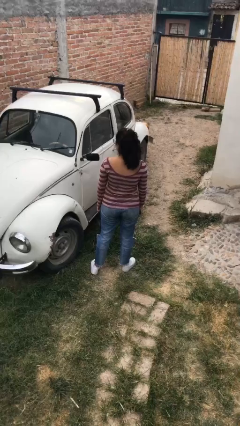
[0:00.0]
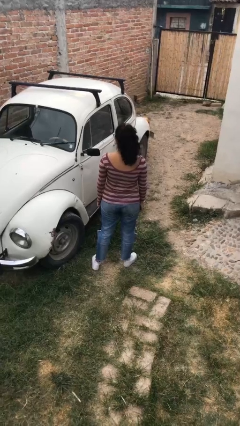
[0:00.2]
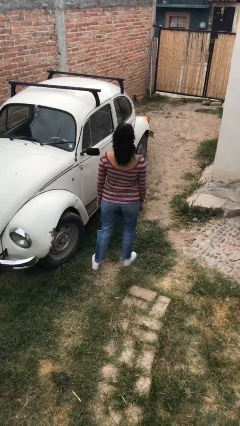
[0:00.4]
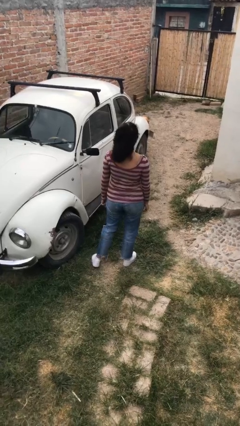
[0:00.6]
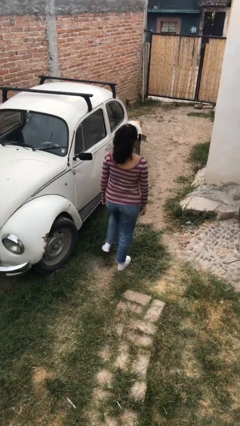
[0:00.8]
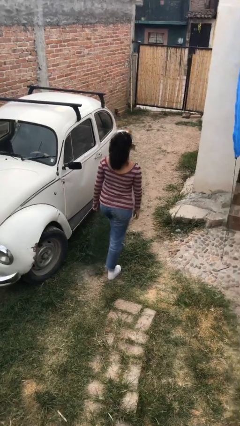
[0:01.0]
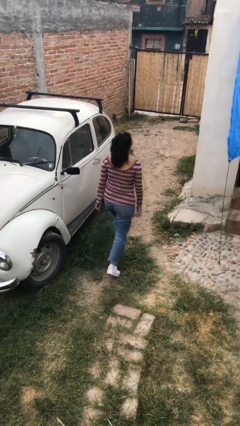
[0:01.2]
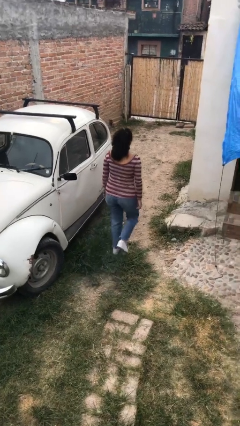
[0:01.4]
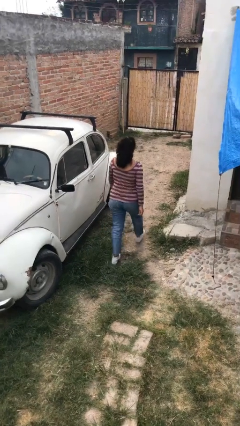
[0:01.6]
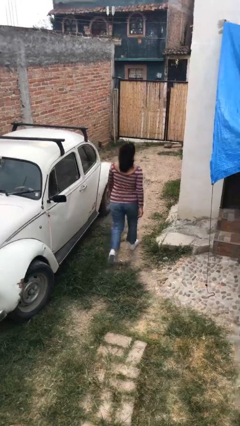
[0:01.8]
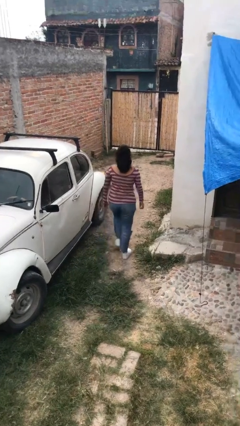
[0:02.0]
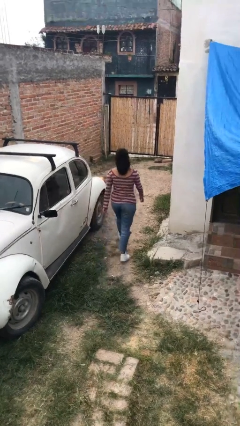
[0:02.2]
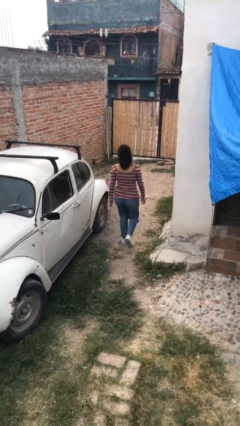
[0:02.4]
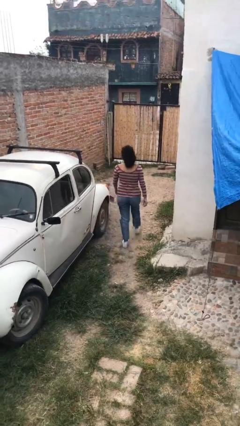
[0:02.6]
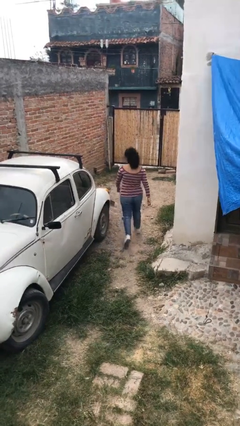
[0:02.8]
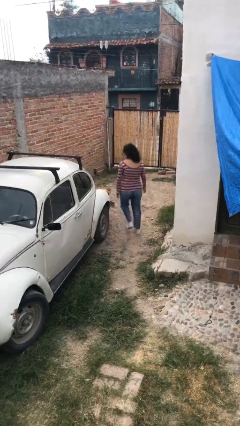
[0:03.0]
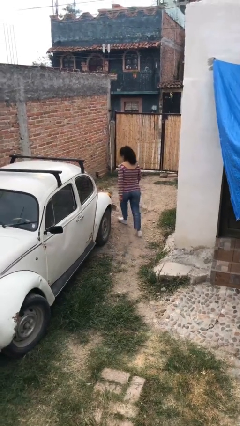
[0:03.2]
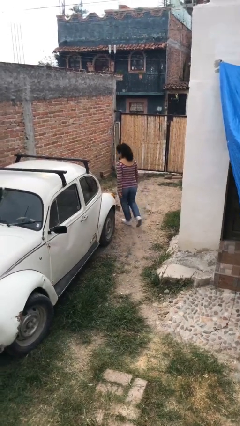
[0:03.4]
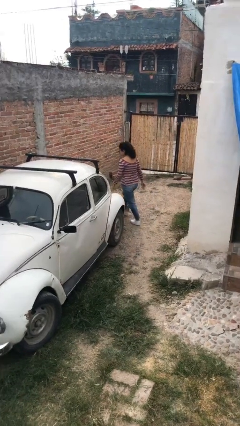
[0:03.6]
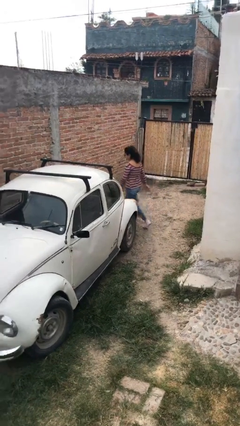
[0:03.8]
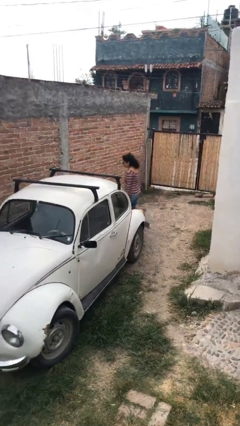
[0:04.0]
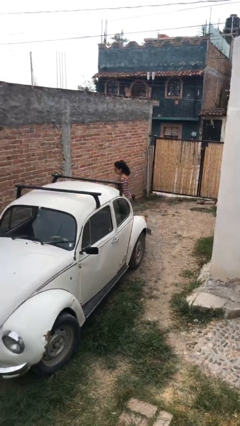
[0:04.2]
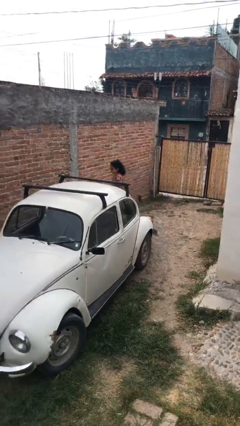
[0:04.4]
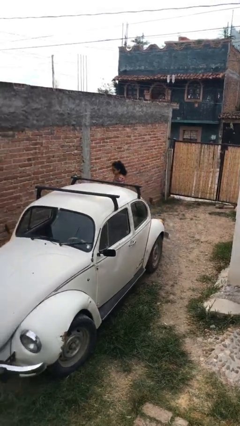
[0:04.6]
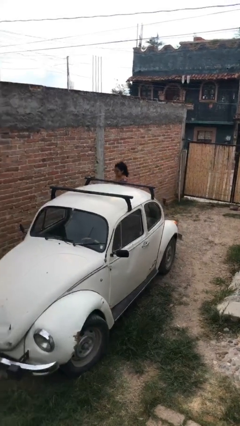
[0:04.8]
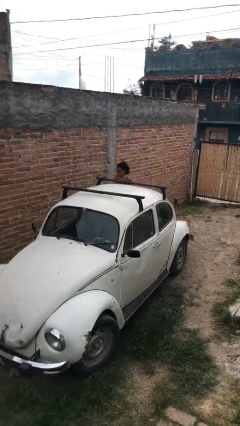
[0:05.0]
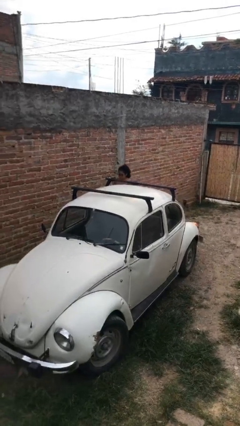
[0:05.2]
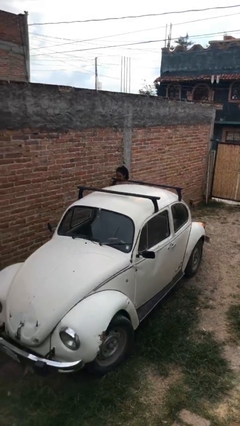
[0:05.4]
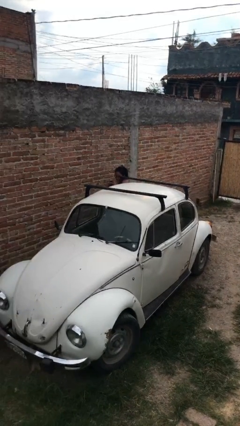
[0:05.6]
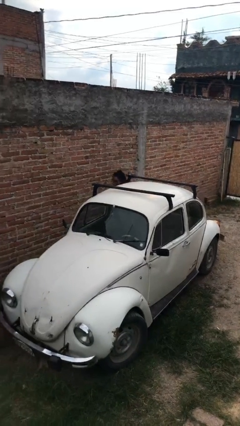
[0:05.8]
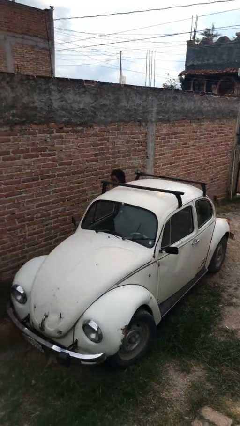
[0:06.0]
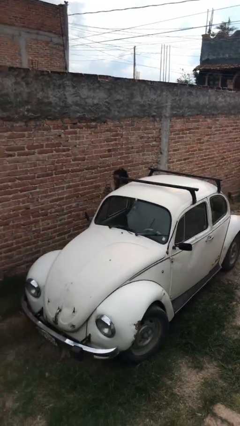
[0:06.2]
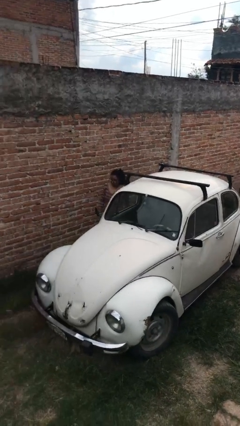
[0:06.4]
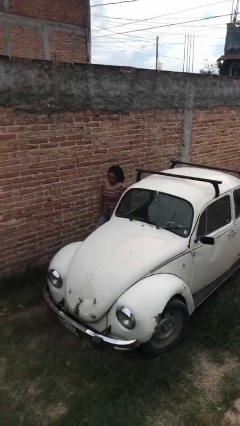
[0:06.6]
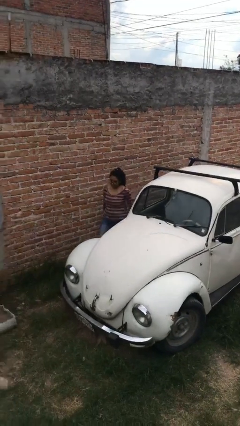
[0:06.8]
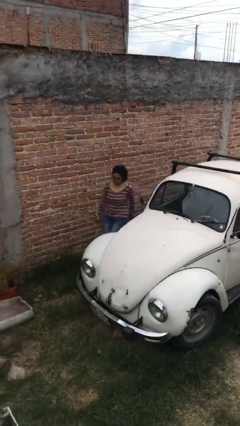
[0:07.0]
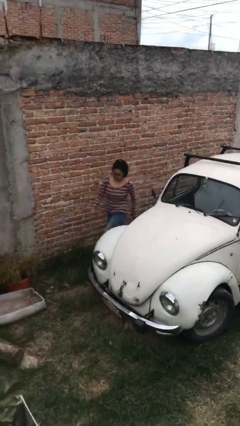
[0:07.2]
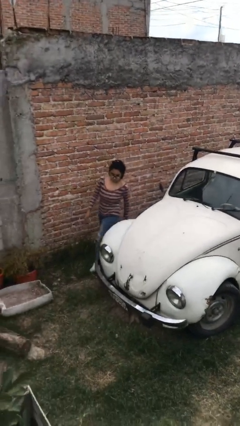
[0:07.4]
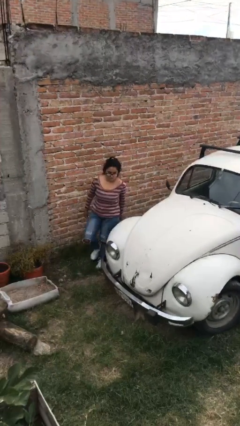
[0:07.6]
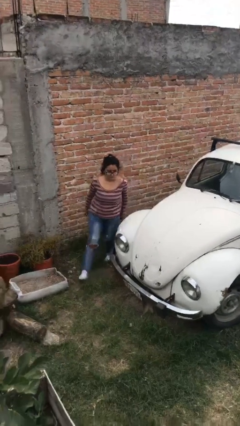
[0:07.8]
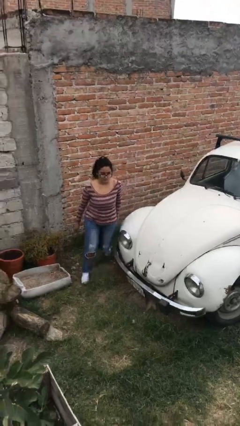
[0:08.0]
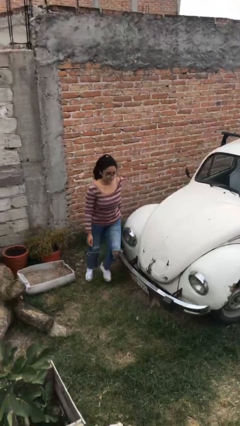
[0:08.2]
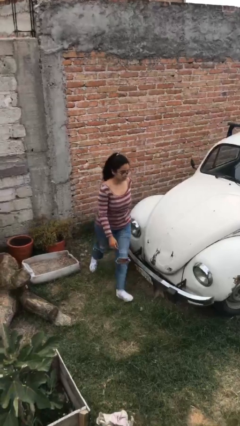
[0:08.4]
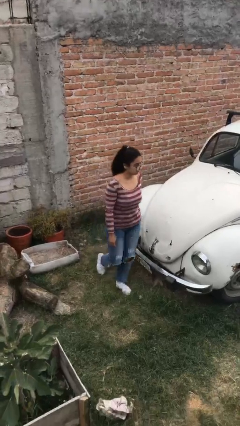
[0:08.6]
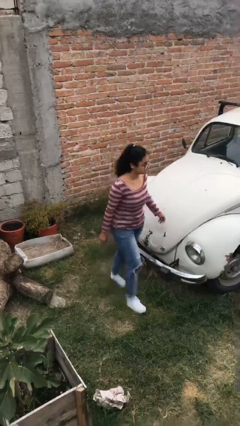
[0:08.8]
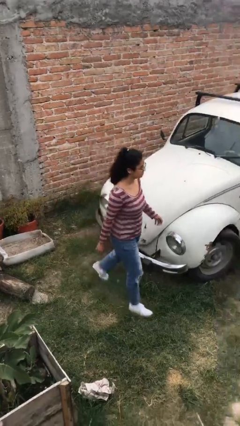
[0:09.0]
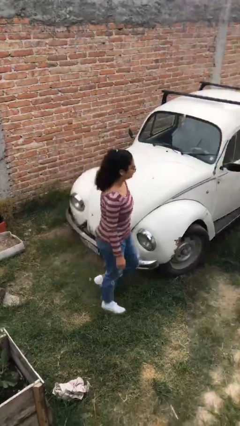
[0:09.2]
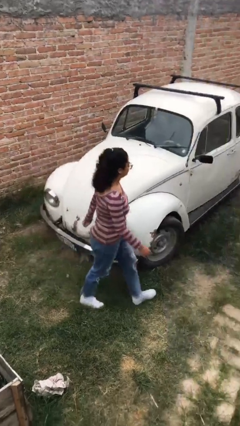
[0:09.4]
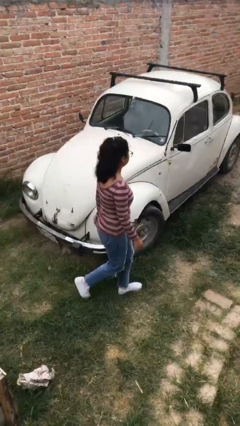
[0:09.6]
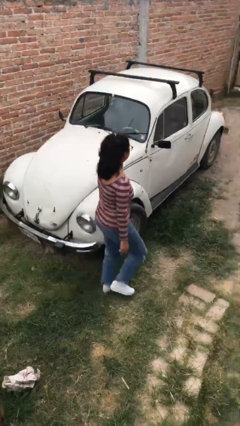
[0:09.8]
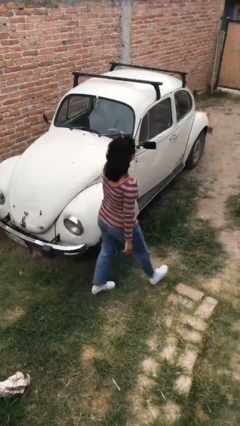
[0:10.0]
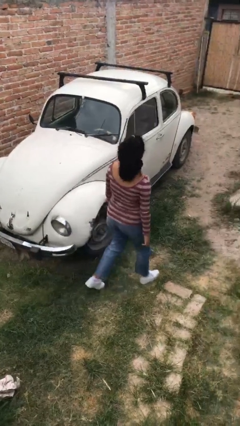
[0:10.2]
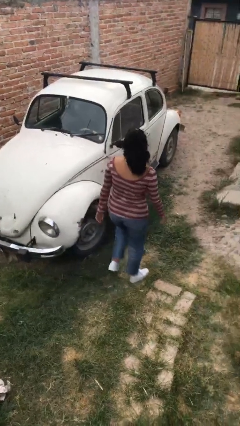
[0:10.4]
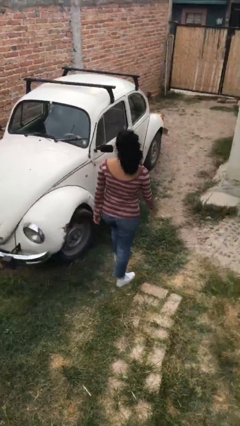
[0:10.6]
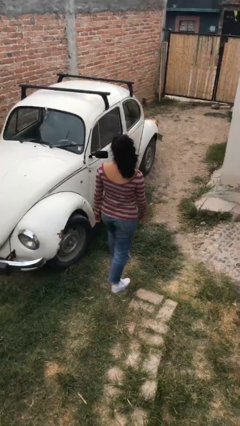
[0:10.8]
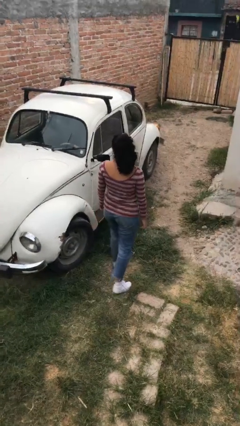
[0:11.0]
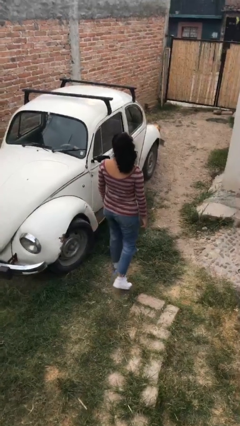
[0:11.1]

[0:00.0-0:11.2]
person walks around car

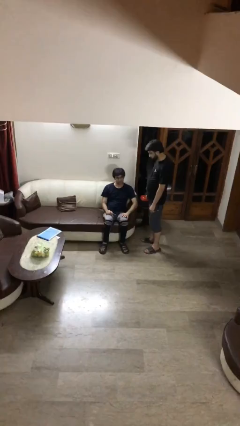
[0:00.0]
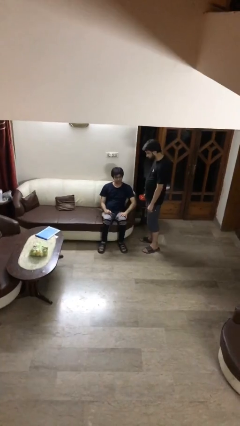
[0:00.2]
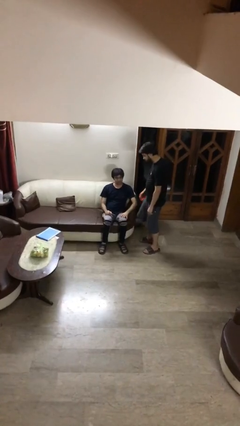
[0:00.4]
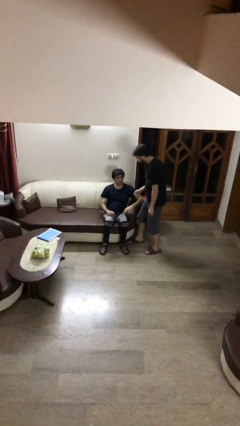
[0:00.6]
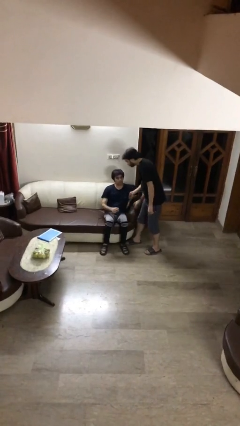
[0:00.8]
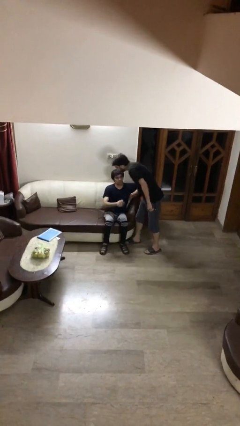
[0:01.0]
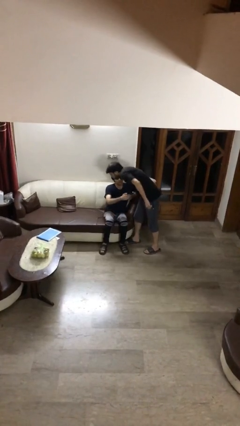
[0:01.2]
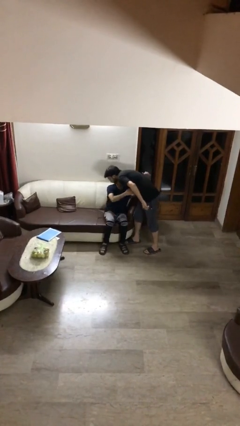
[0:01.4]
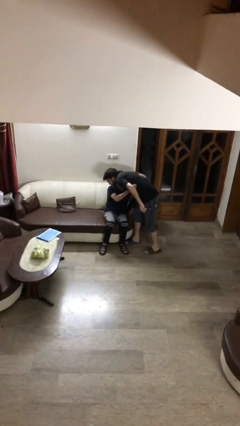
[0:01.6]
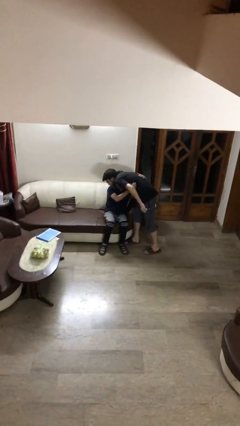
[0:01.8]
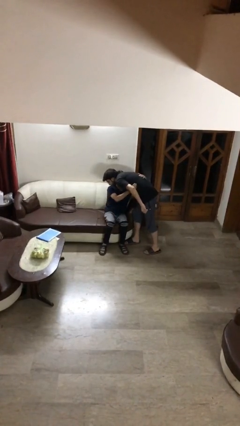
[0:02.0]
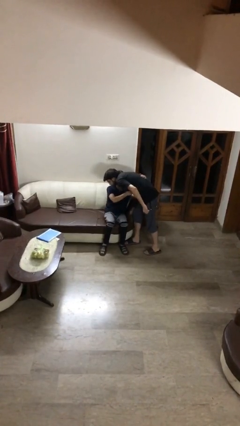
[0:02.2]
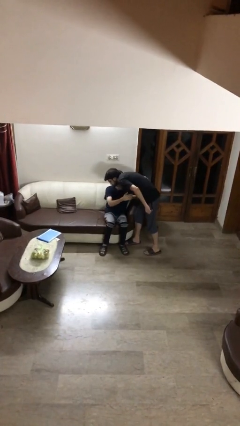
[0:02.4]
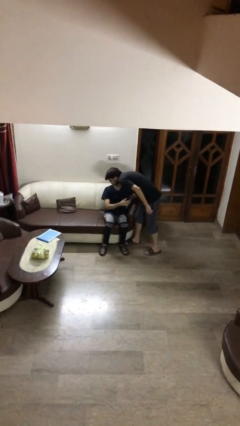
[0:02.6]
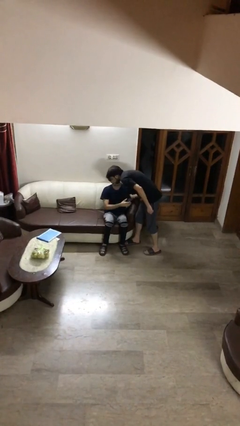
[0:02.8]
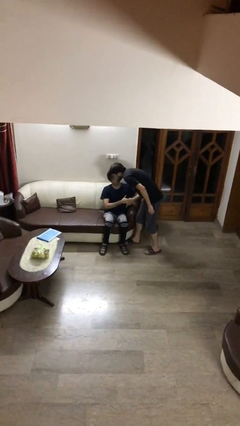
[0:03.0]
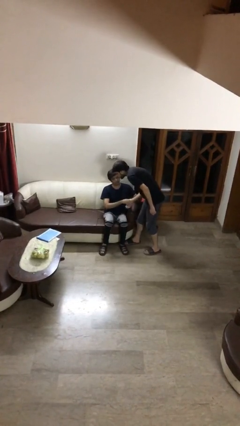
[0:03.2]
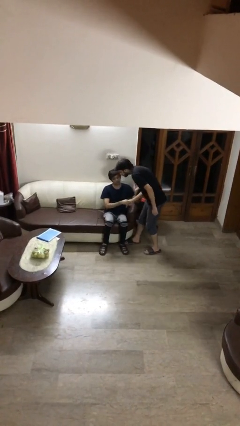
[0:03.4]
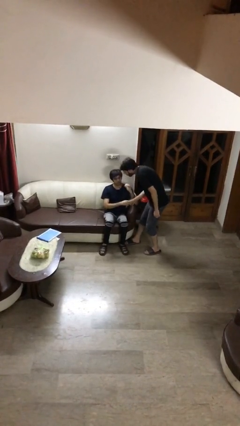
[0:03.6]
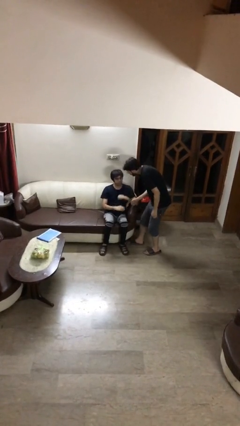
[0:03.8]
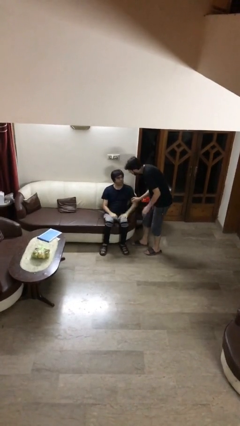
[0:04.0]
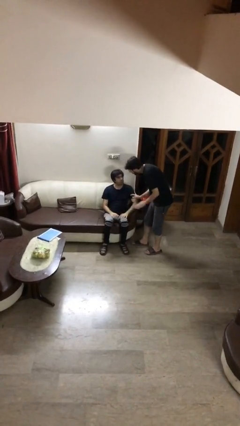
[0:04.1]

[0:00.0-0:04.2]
person embraces person

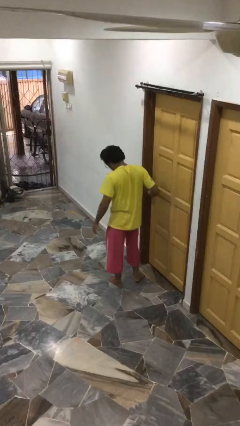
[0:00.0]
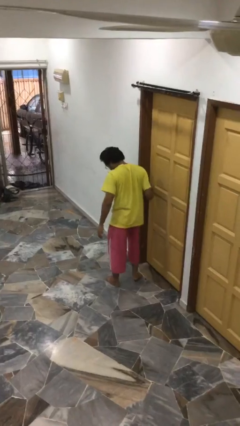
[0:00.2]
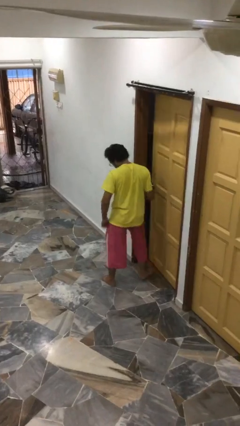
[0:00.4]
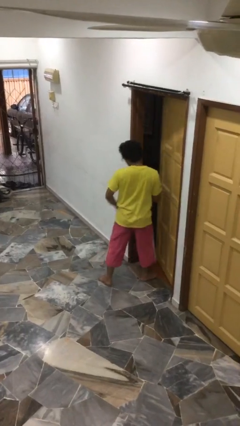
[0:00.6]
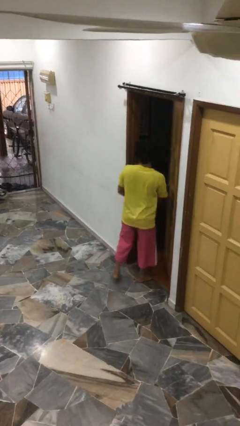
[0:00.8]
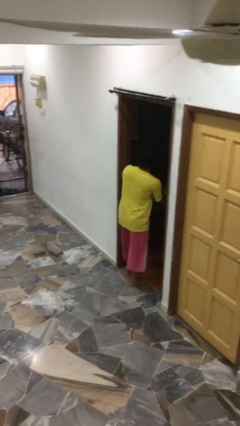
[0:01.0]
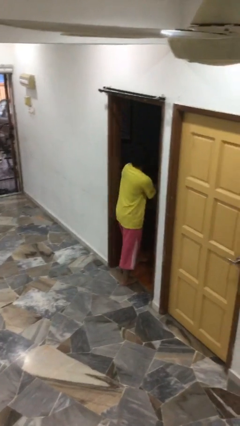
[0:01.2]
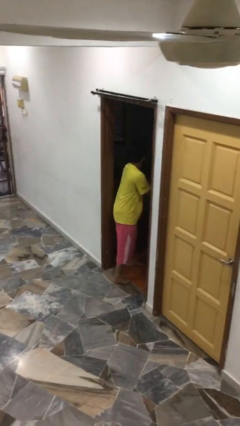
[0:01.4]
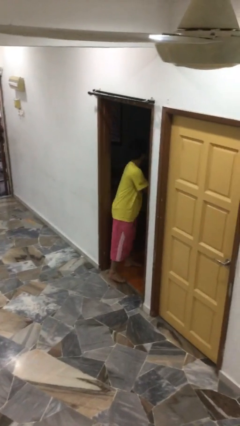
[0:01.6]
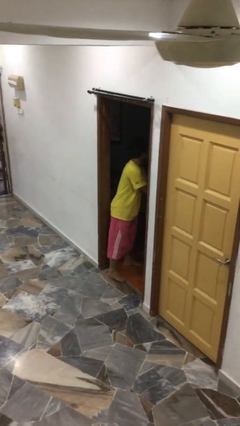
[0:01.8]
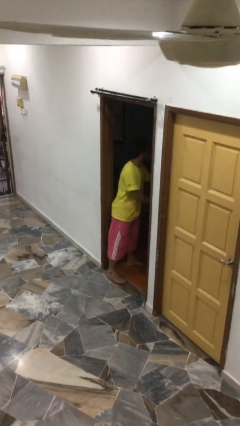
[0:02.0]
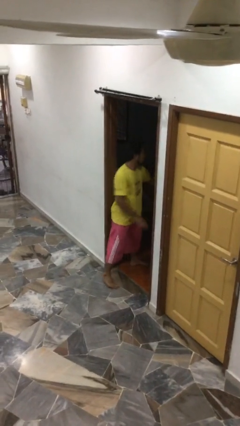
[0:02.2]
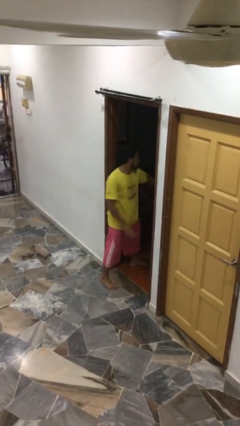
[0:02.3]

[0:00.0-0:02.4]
person opens facility door

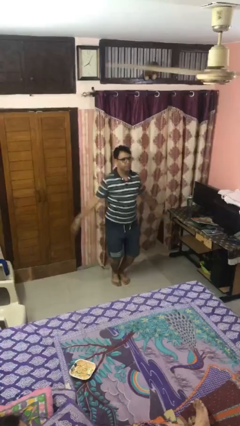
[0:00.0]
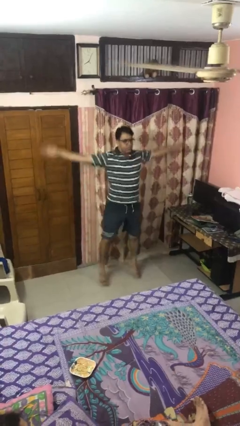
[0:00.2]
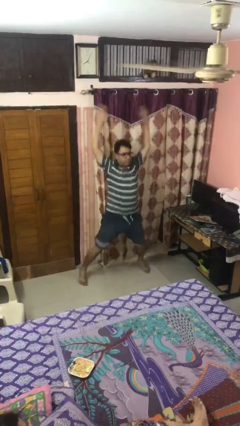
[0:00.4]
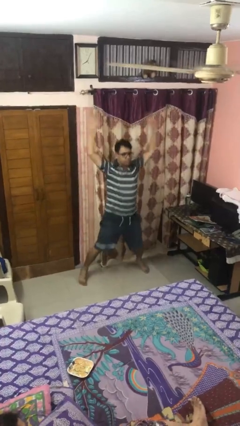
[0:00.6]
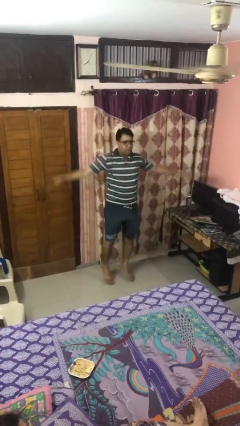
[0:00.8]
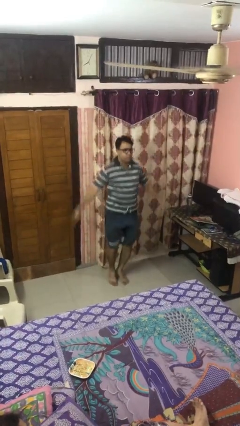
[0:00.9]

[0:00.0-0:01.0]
person exercises with jumping jacks
